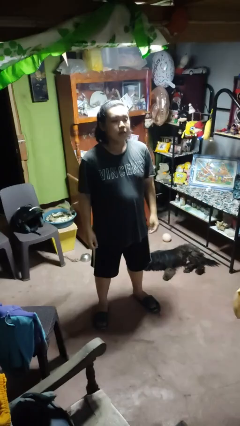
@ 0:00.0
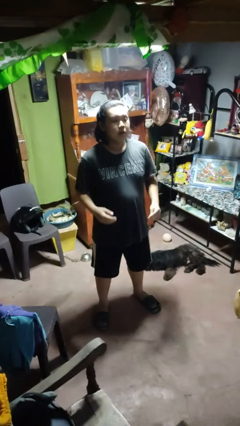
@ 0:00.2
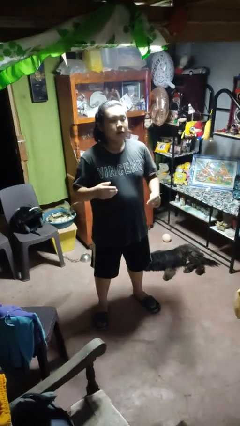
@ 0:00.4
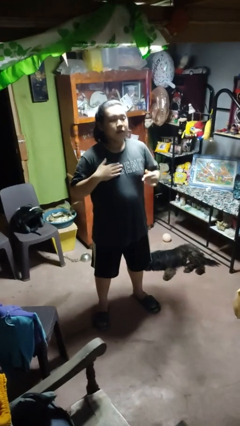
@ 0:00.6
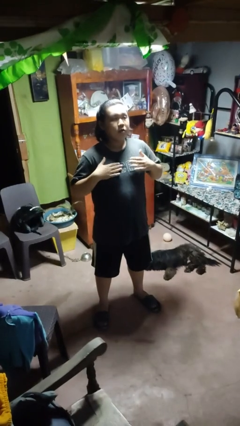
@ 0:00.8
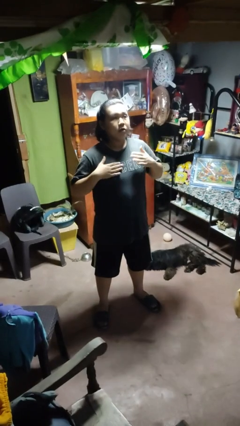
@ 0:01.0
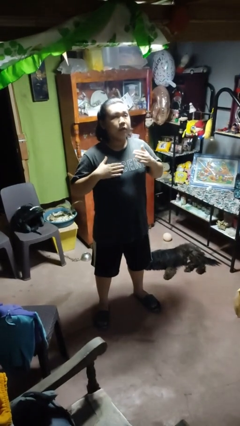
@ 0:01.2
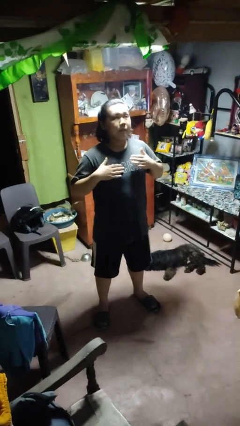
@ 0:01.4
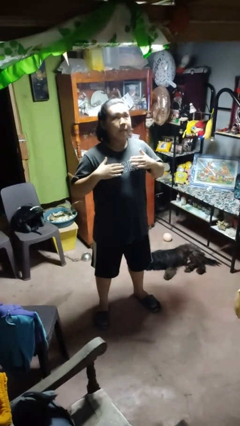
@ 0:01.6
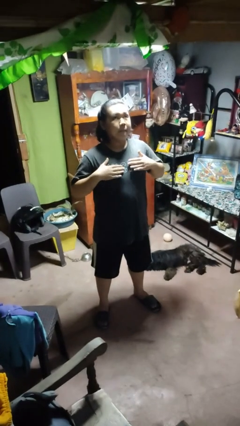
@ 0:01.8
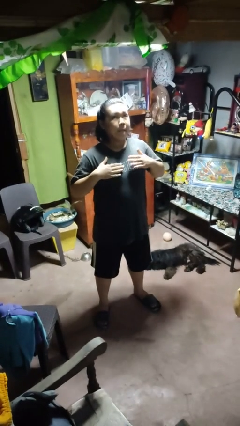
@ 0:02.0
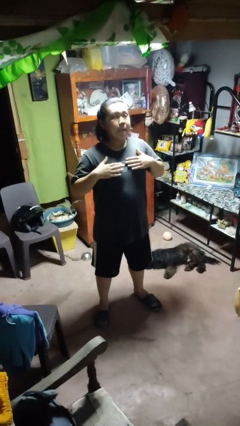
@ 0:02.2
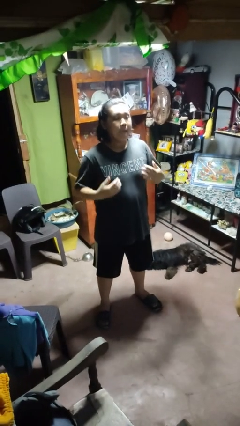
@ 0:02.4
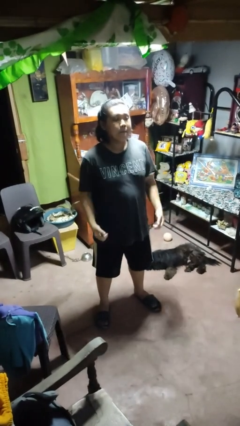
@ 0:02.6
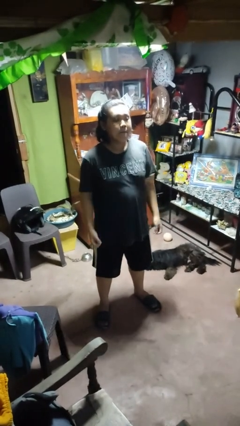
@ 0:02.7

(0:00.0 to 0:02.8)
person drums on chest
